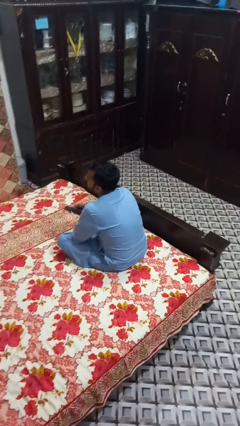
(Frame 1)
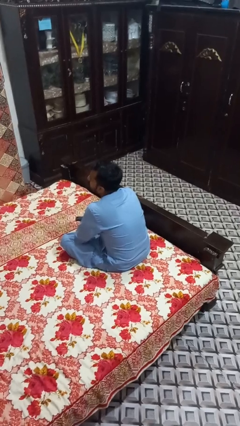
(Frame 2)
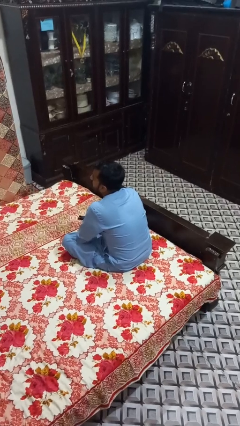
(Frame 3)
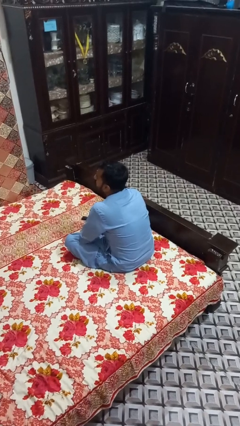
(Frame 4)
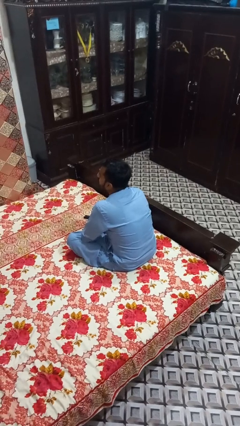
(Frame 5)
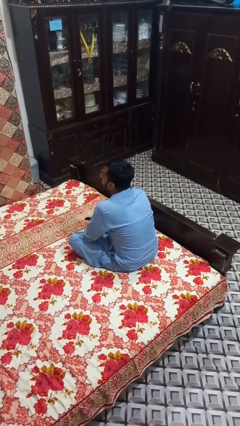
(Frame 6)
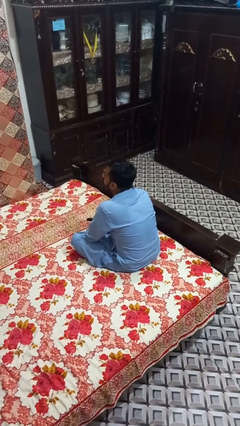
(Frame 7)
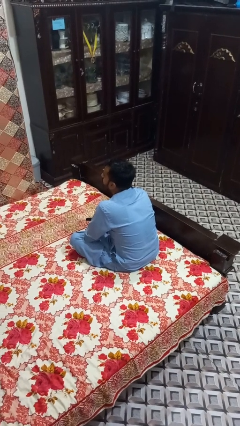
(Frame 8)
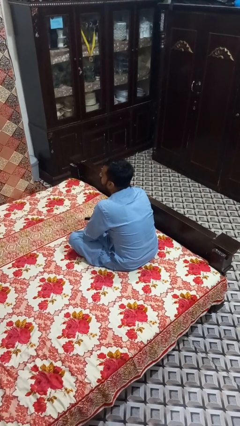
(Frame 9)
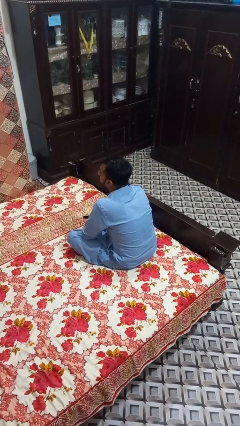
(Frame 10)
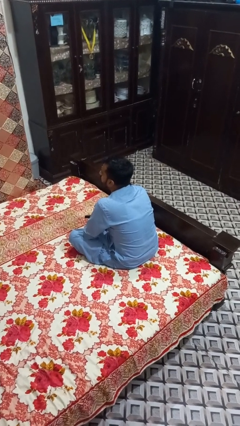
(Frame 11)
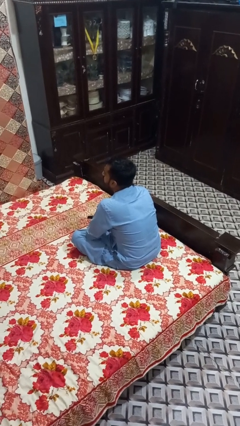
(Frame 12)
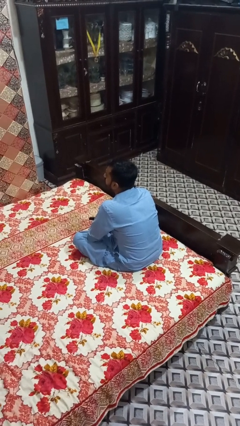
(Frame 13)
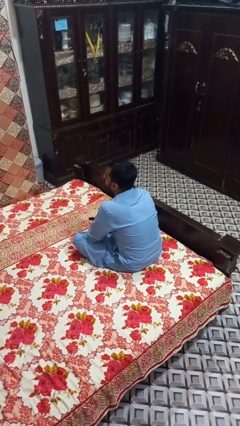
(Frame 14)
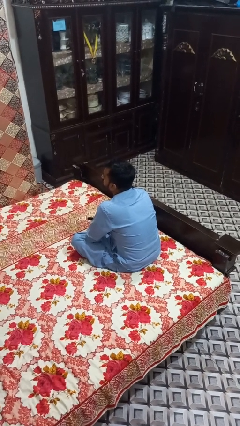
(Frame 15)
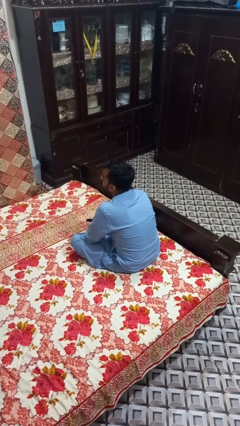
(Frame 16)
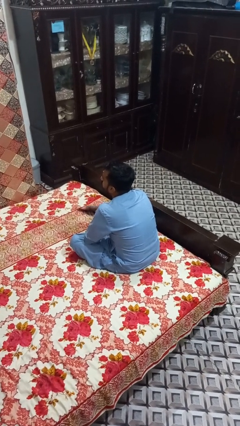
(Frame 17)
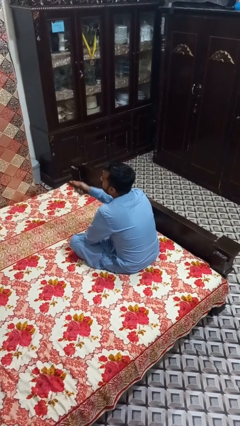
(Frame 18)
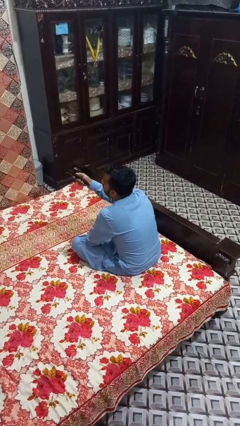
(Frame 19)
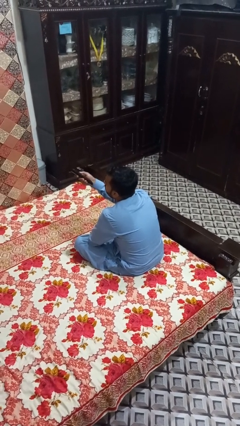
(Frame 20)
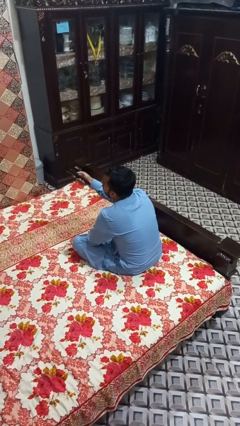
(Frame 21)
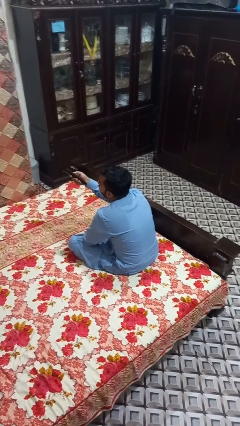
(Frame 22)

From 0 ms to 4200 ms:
person uses television remote

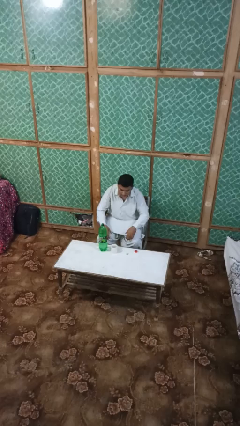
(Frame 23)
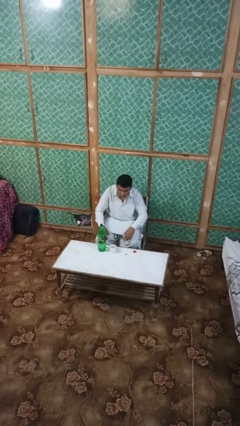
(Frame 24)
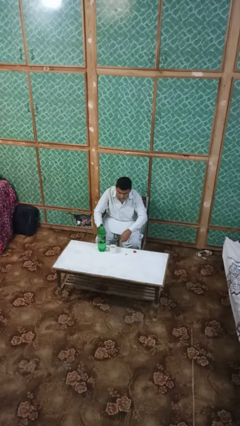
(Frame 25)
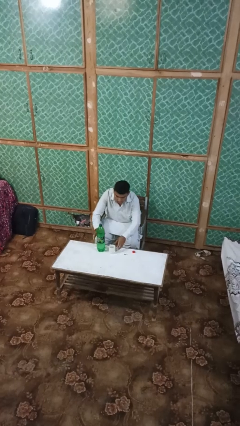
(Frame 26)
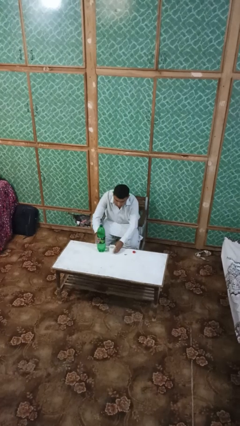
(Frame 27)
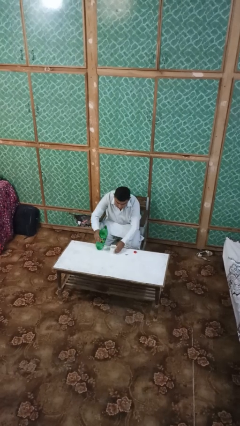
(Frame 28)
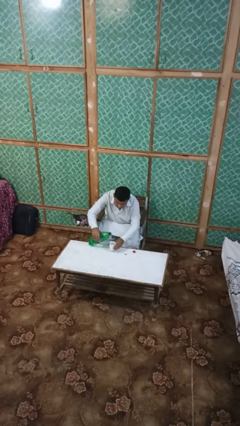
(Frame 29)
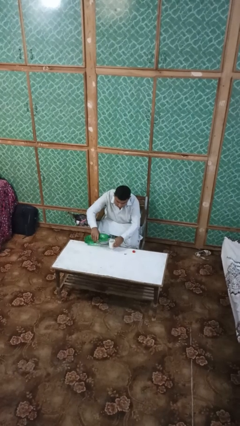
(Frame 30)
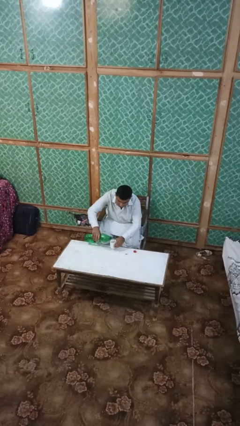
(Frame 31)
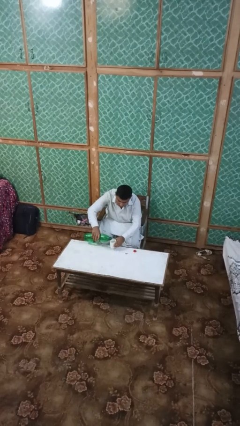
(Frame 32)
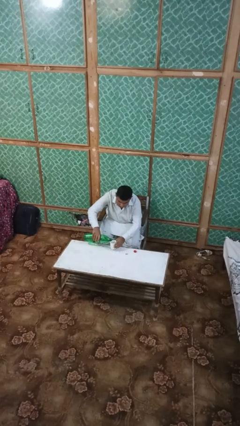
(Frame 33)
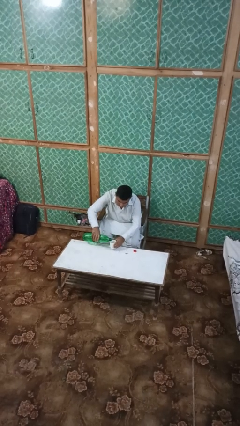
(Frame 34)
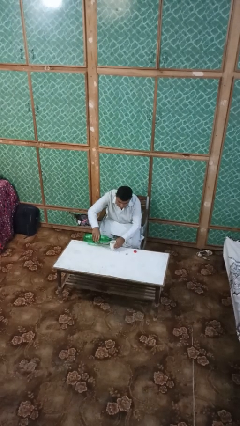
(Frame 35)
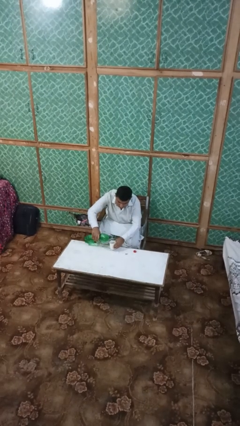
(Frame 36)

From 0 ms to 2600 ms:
person pours liquid into cup

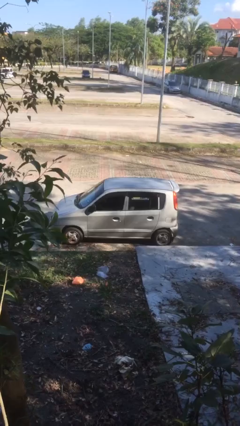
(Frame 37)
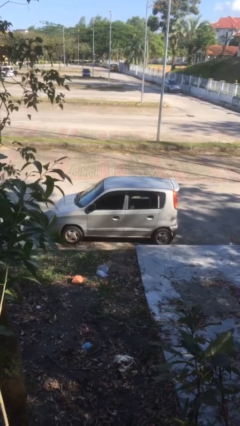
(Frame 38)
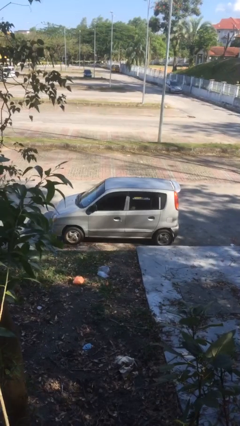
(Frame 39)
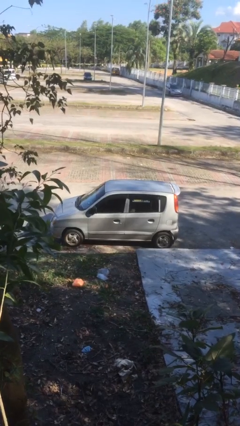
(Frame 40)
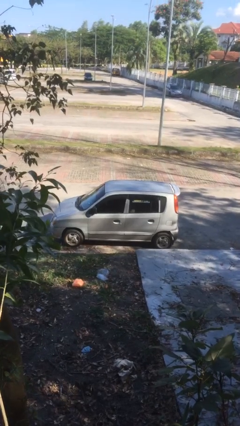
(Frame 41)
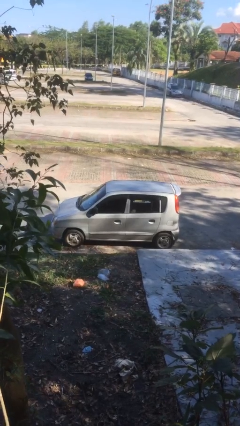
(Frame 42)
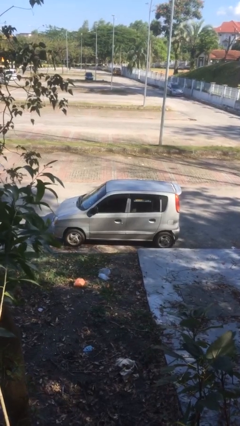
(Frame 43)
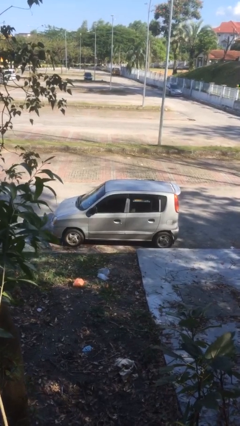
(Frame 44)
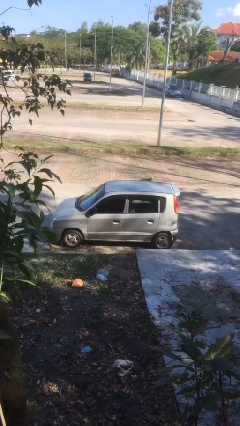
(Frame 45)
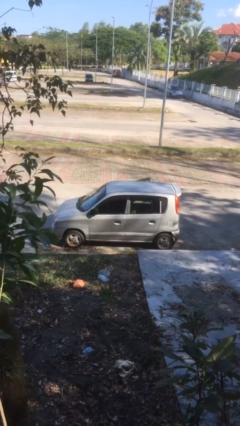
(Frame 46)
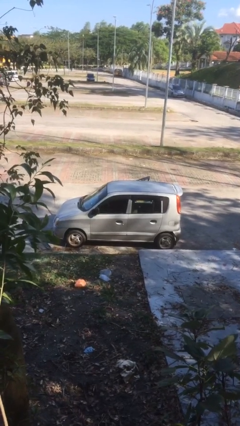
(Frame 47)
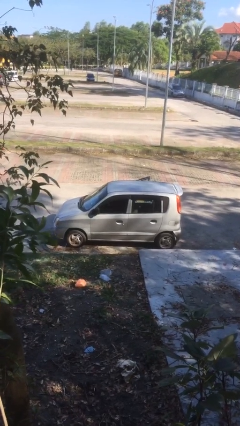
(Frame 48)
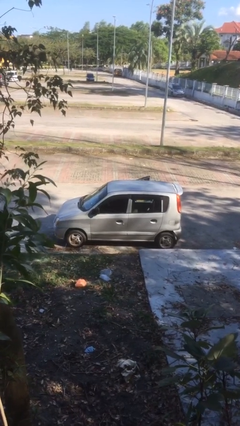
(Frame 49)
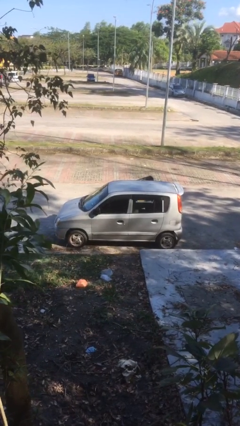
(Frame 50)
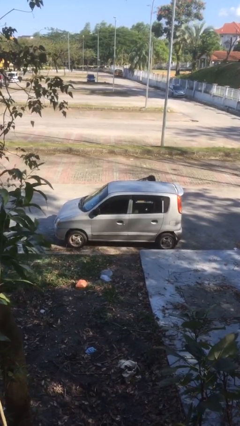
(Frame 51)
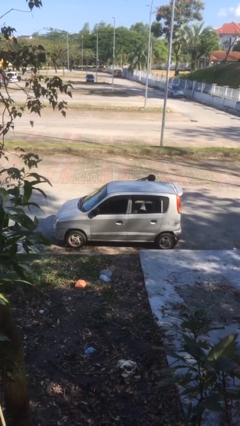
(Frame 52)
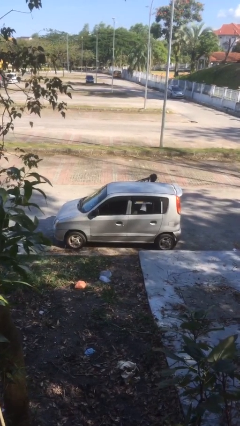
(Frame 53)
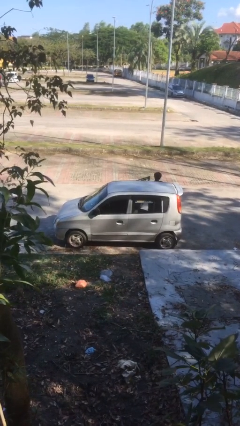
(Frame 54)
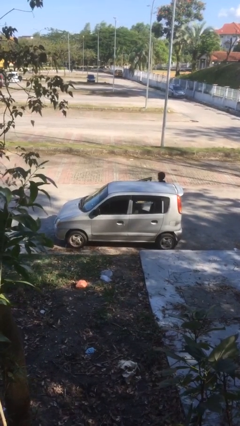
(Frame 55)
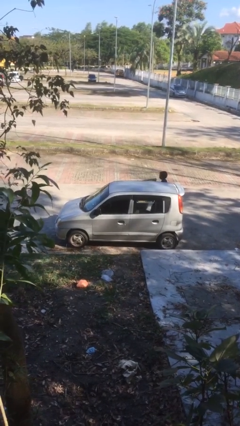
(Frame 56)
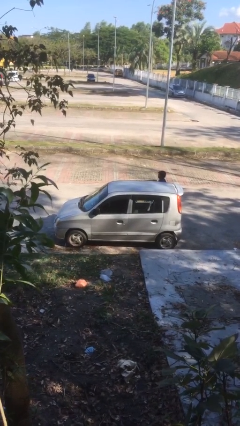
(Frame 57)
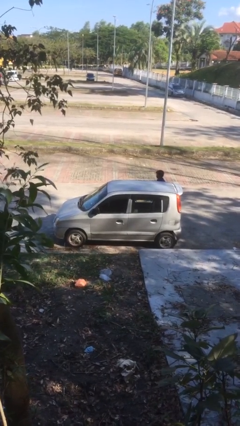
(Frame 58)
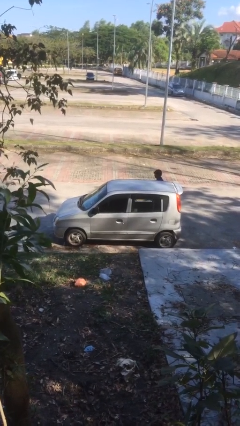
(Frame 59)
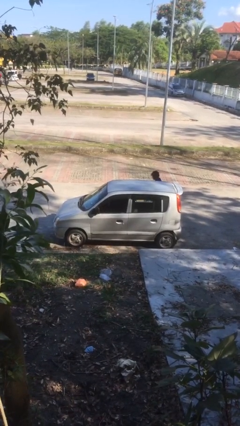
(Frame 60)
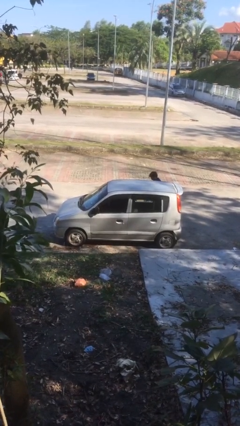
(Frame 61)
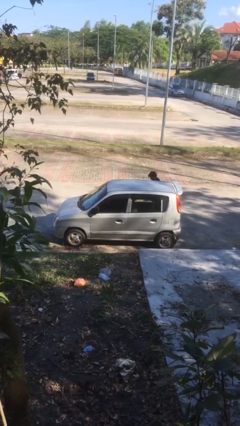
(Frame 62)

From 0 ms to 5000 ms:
car drops off person

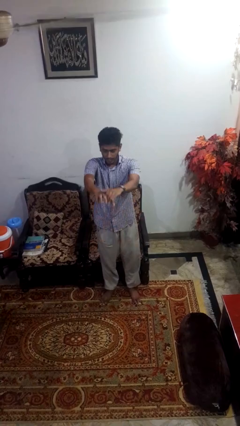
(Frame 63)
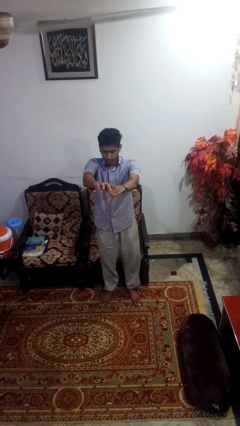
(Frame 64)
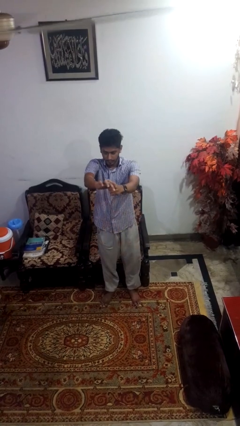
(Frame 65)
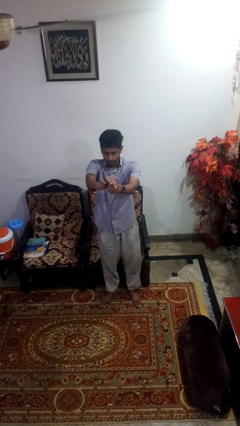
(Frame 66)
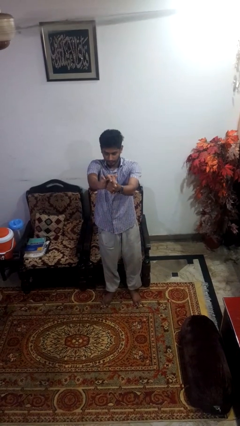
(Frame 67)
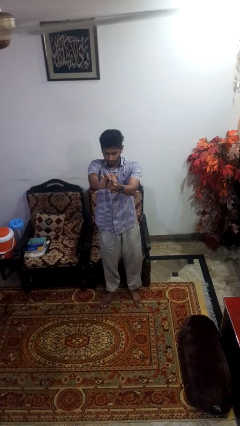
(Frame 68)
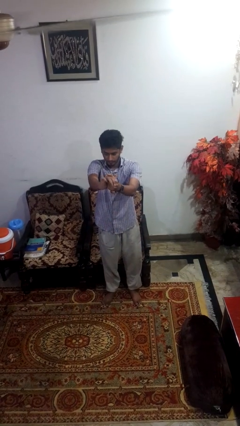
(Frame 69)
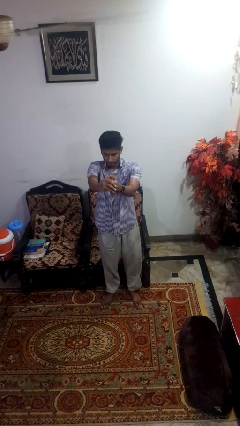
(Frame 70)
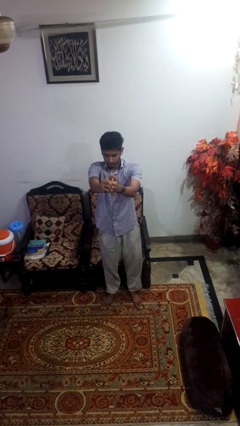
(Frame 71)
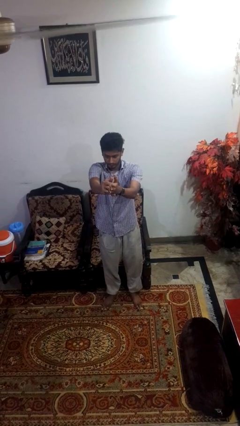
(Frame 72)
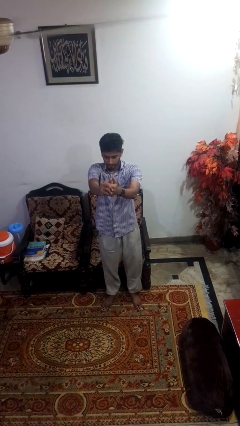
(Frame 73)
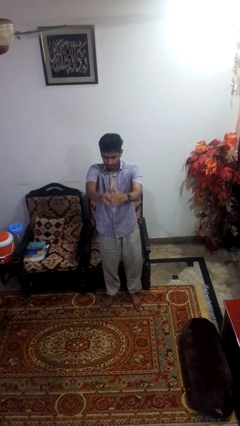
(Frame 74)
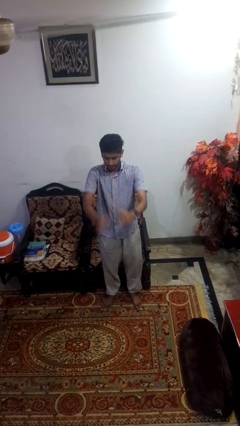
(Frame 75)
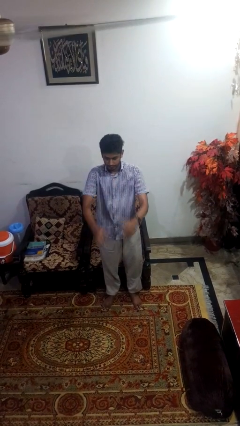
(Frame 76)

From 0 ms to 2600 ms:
person cracks knuckles

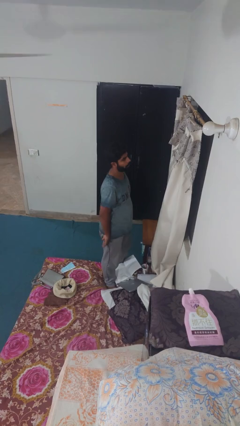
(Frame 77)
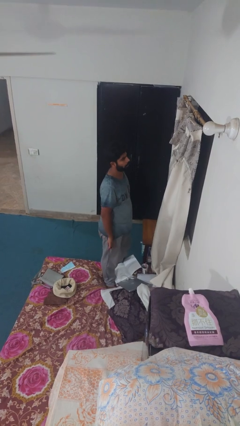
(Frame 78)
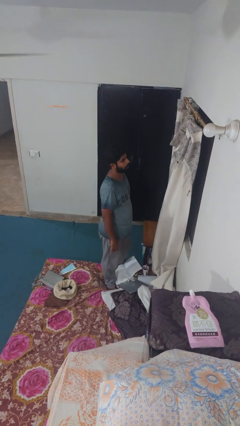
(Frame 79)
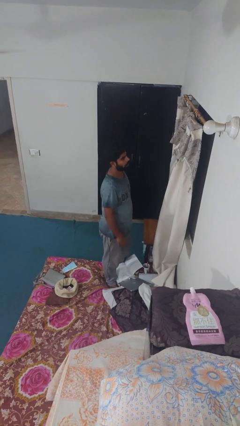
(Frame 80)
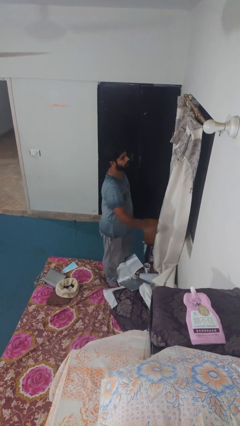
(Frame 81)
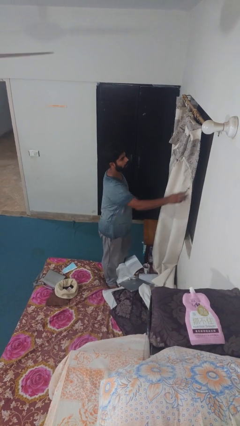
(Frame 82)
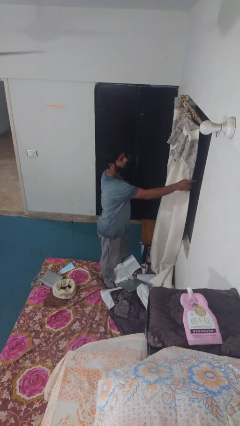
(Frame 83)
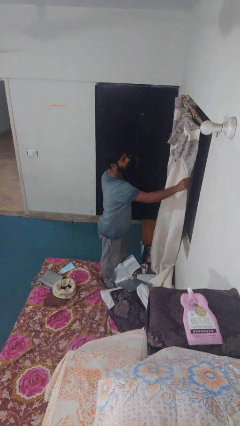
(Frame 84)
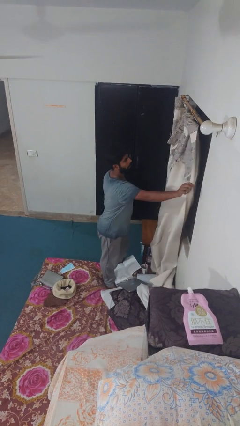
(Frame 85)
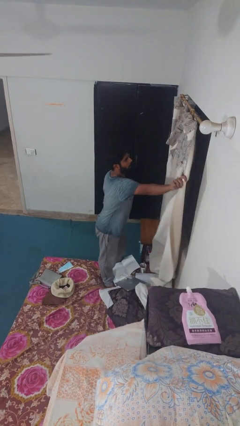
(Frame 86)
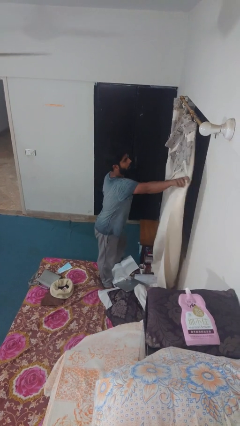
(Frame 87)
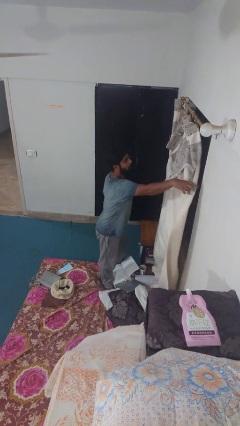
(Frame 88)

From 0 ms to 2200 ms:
person closes curtains

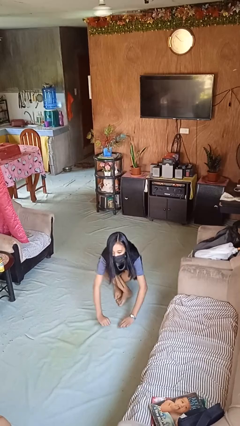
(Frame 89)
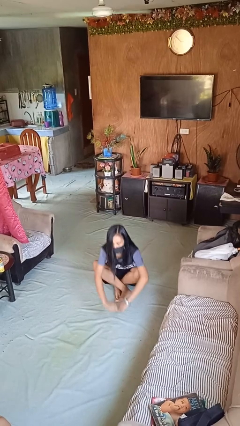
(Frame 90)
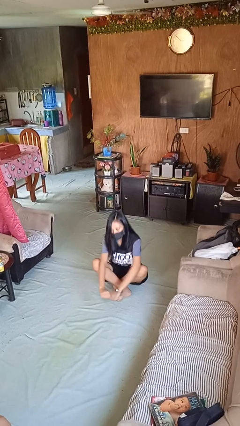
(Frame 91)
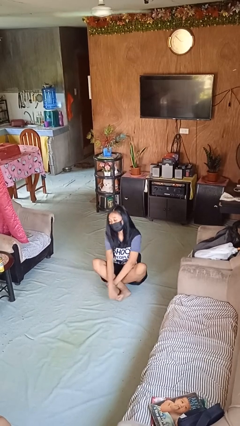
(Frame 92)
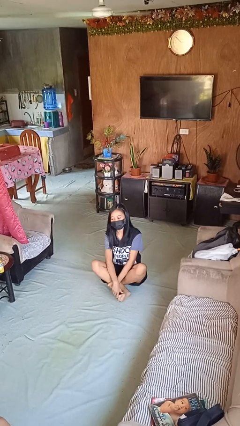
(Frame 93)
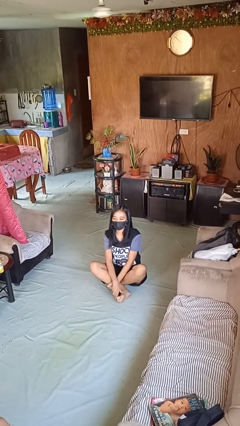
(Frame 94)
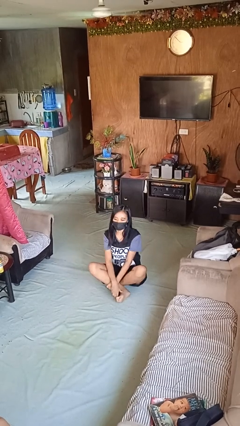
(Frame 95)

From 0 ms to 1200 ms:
person sits crisscross
